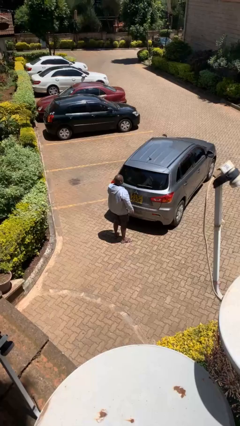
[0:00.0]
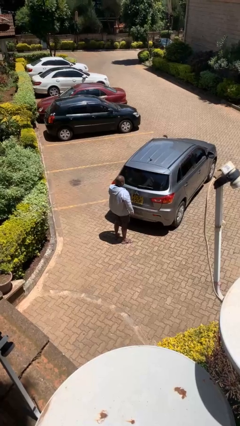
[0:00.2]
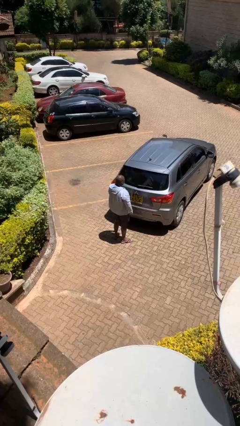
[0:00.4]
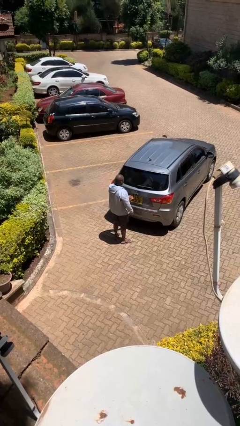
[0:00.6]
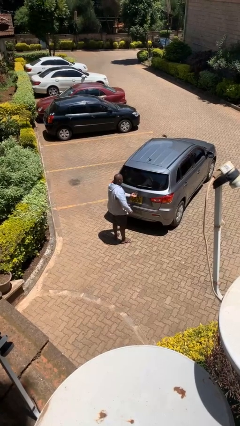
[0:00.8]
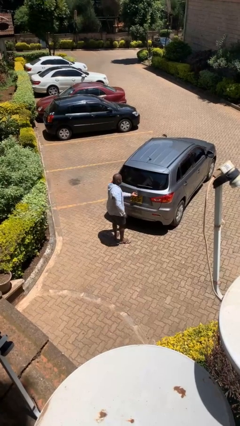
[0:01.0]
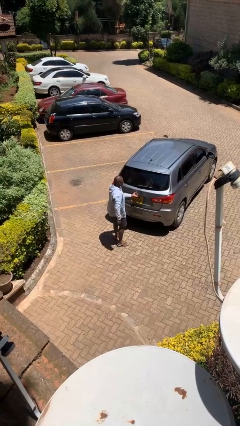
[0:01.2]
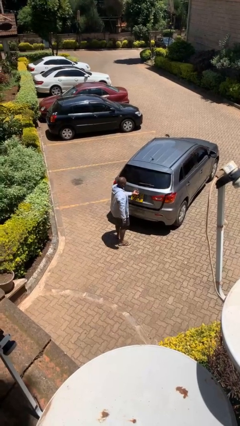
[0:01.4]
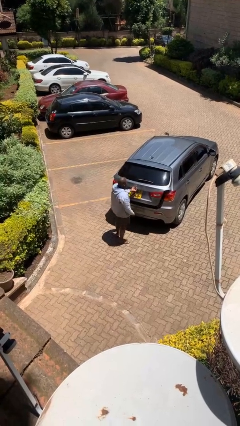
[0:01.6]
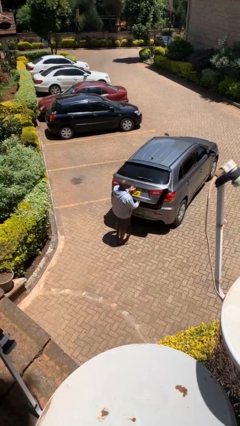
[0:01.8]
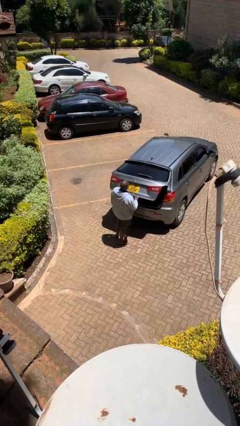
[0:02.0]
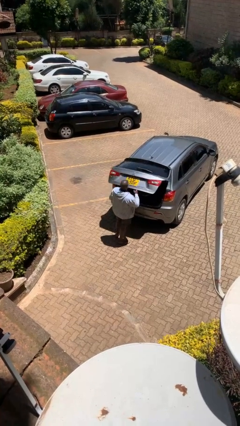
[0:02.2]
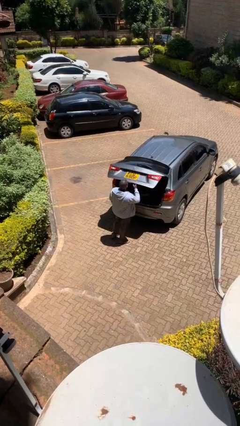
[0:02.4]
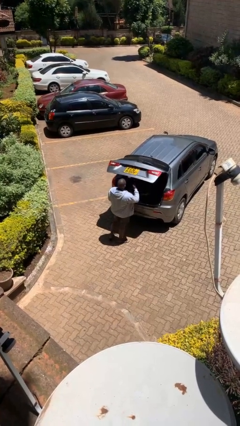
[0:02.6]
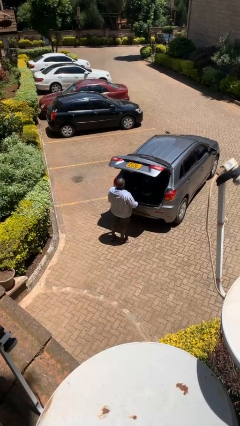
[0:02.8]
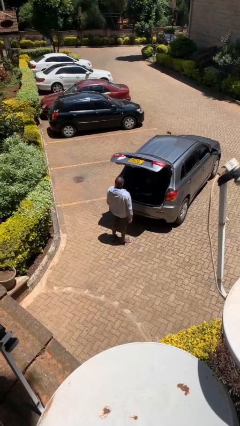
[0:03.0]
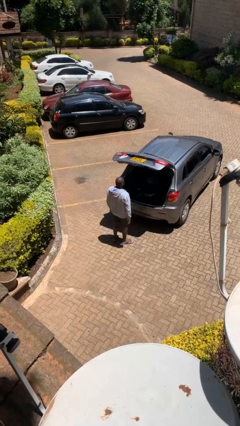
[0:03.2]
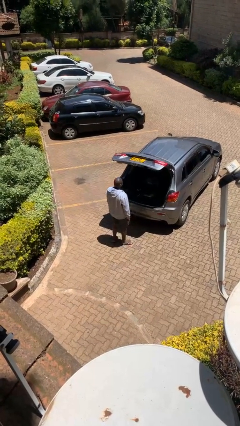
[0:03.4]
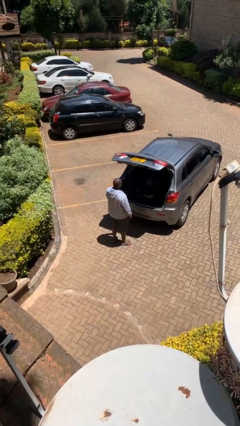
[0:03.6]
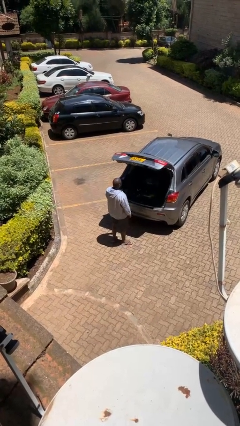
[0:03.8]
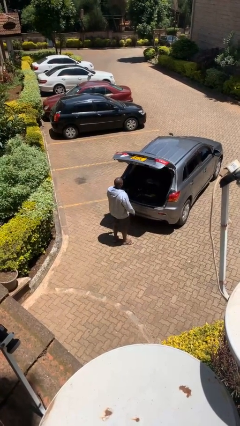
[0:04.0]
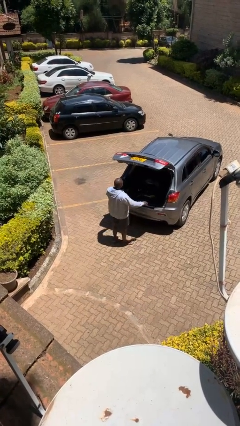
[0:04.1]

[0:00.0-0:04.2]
person opens car trunk

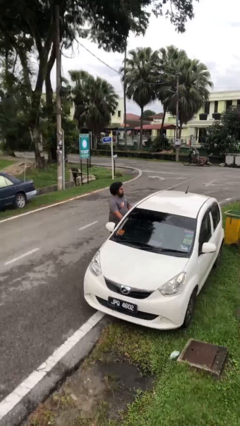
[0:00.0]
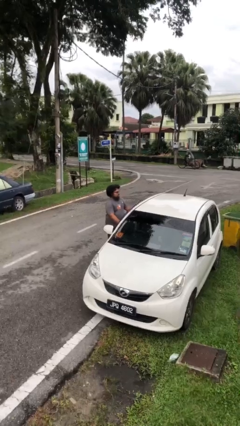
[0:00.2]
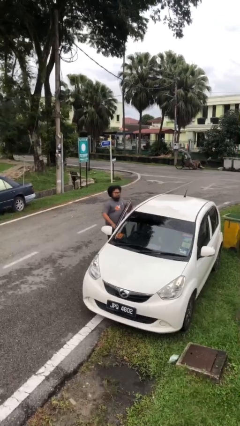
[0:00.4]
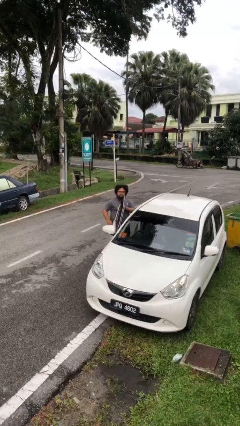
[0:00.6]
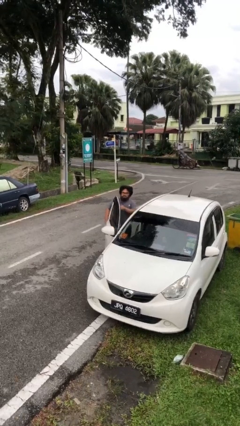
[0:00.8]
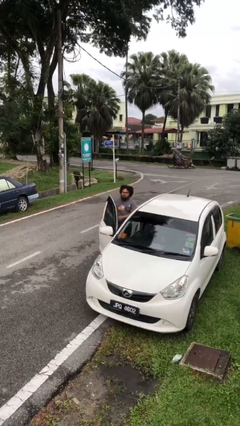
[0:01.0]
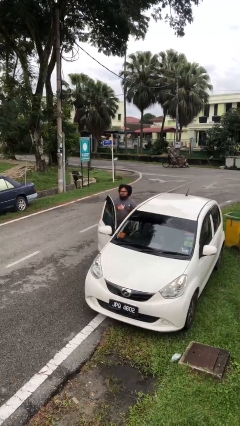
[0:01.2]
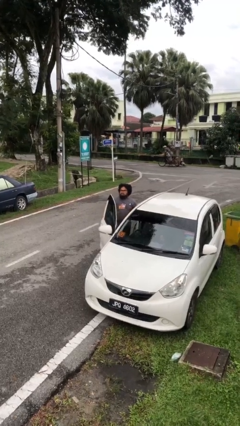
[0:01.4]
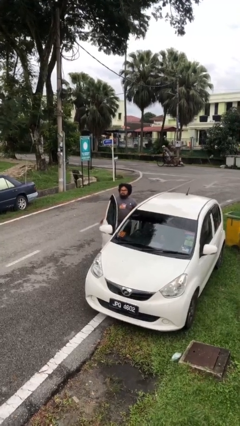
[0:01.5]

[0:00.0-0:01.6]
person opens car door

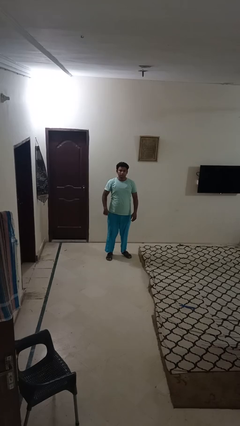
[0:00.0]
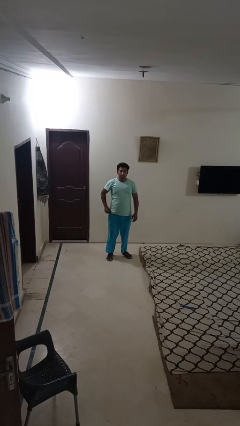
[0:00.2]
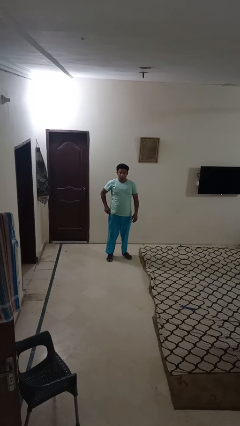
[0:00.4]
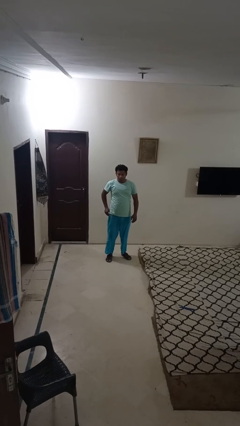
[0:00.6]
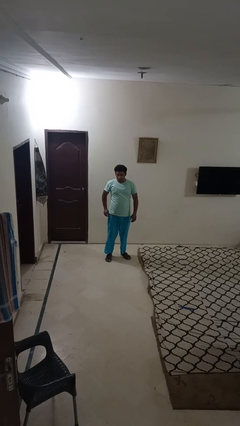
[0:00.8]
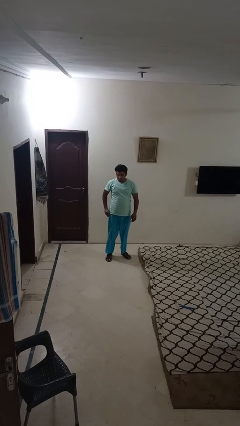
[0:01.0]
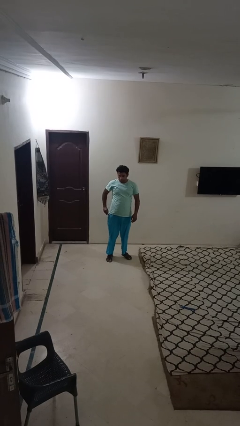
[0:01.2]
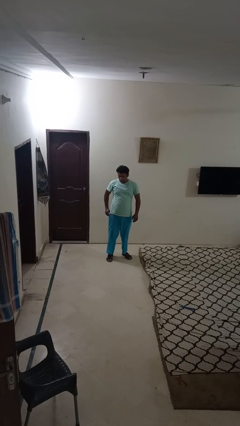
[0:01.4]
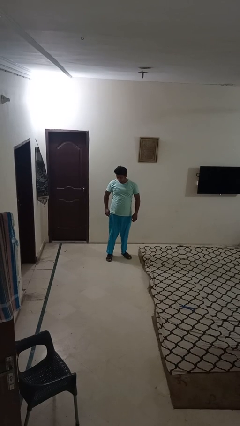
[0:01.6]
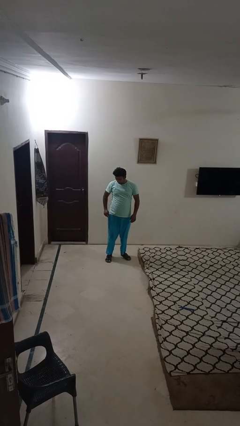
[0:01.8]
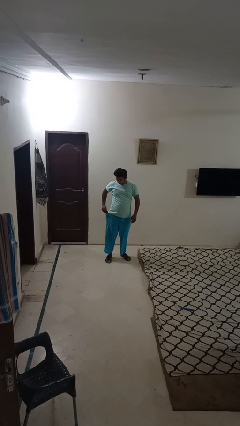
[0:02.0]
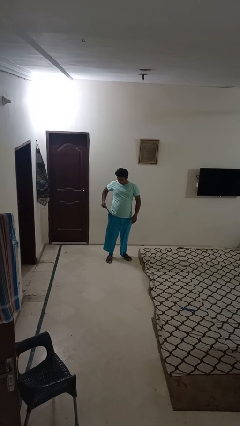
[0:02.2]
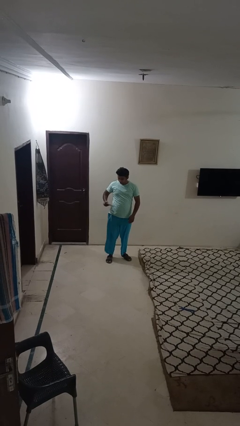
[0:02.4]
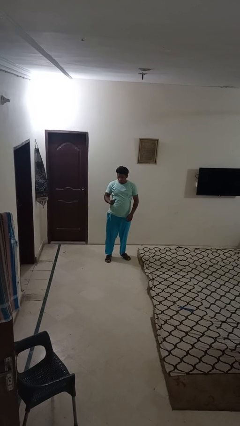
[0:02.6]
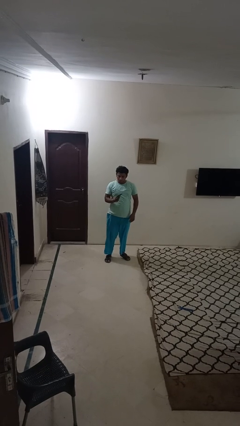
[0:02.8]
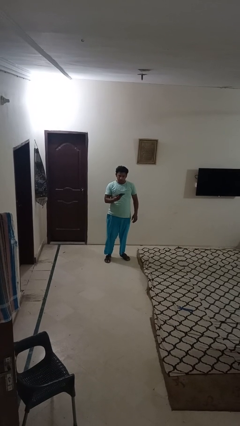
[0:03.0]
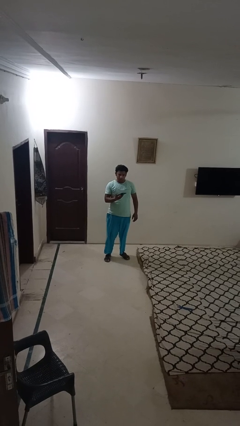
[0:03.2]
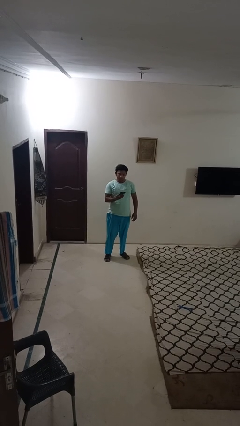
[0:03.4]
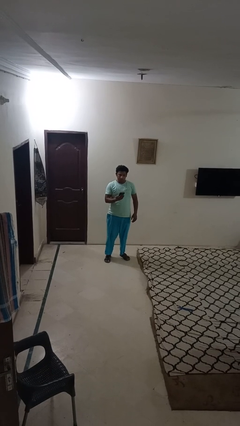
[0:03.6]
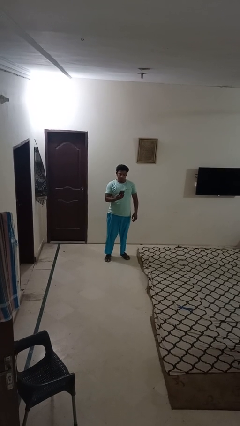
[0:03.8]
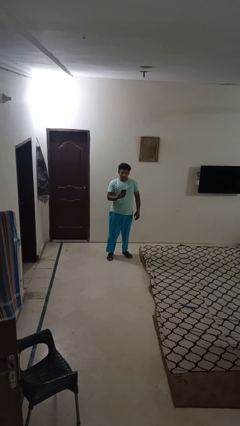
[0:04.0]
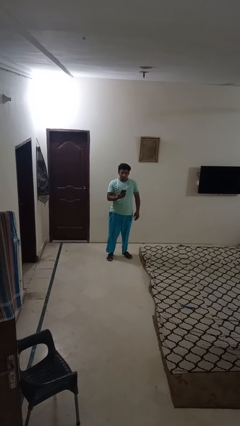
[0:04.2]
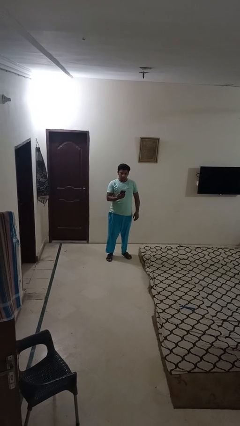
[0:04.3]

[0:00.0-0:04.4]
person takes phone from pocket

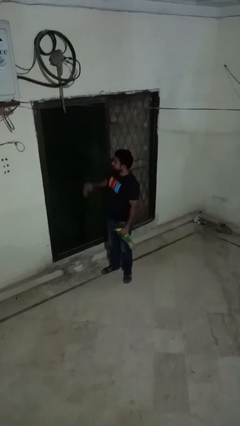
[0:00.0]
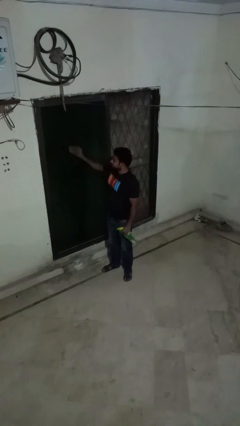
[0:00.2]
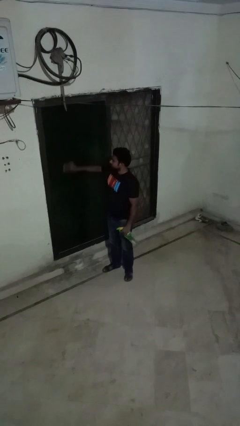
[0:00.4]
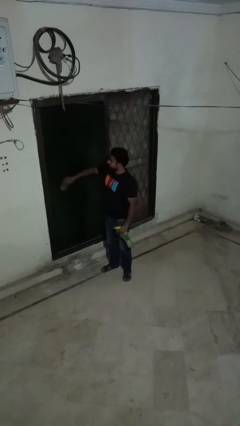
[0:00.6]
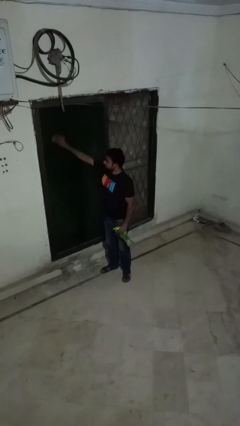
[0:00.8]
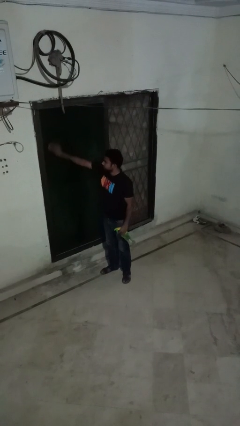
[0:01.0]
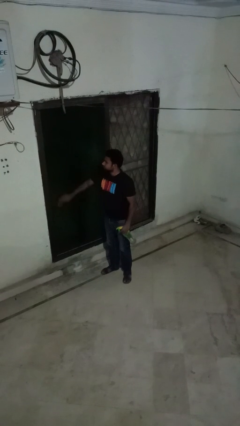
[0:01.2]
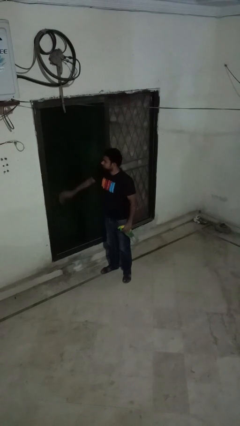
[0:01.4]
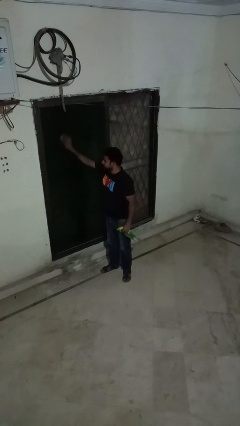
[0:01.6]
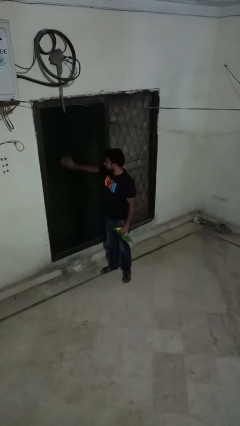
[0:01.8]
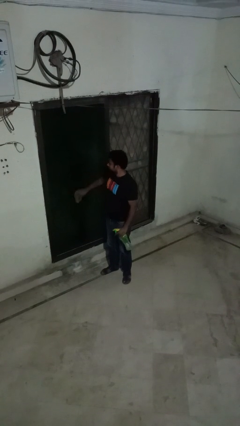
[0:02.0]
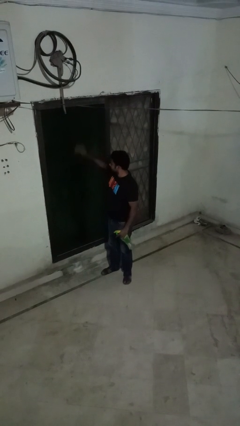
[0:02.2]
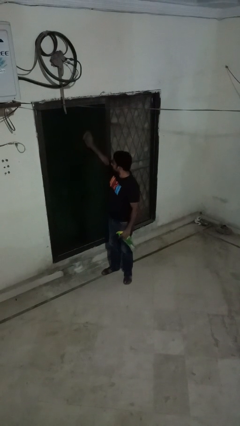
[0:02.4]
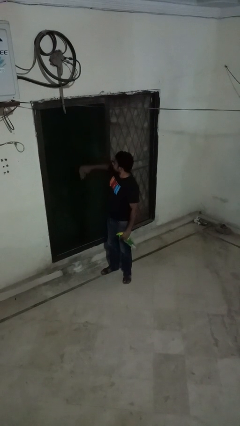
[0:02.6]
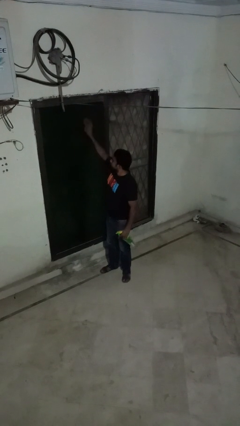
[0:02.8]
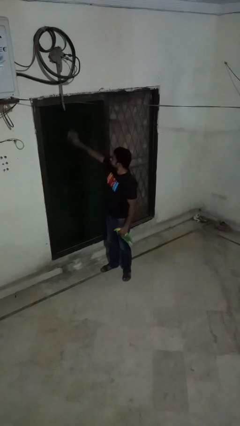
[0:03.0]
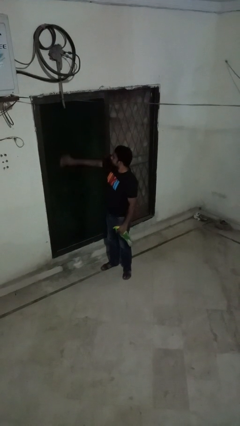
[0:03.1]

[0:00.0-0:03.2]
person washes window

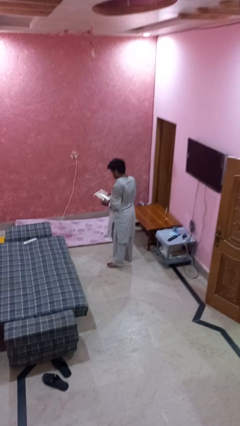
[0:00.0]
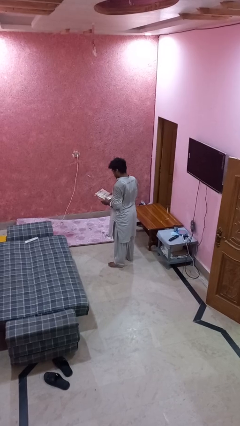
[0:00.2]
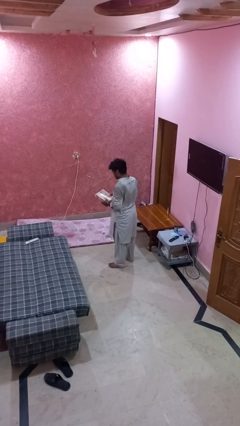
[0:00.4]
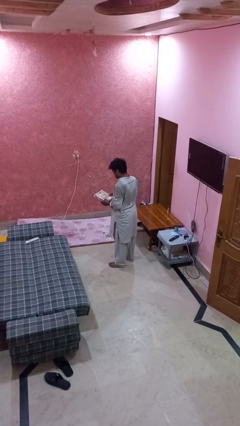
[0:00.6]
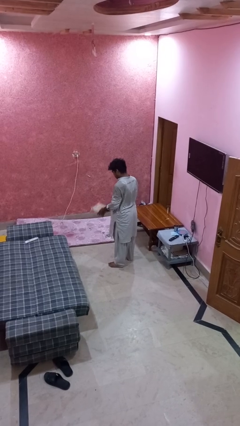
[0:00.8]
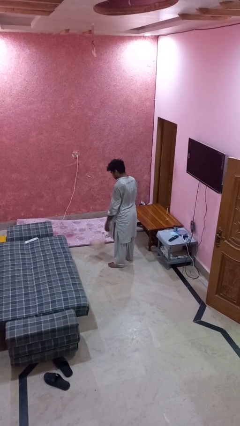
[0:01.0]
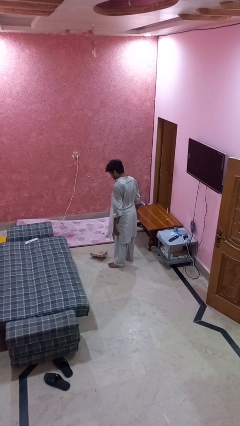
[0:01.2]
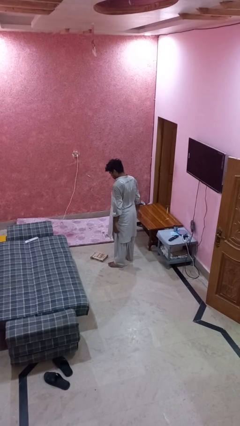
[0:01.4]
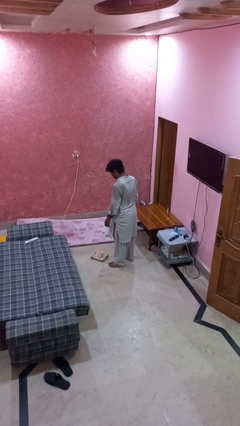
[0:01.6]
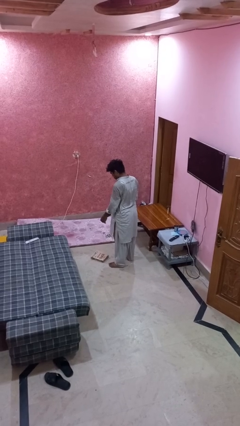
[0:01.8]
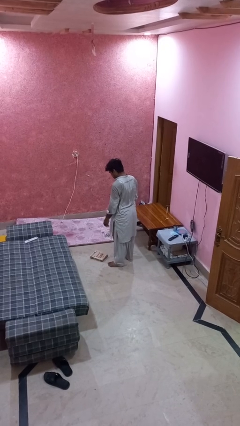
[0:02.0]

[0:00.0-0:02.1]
person throws object to ground

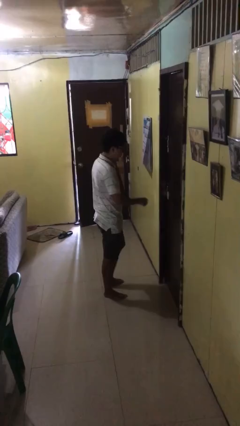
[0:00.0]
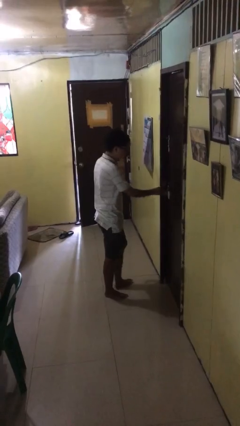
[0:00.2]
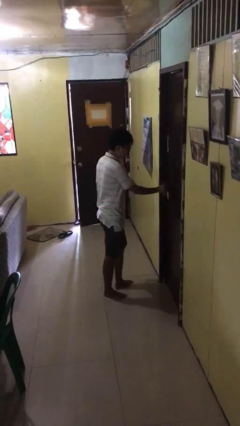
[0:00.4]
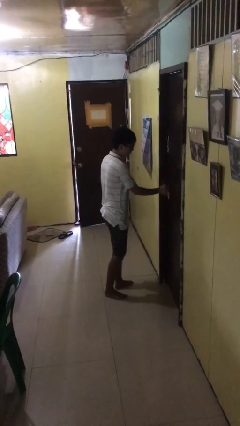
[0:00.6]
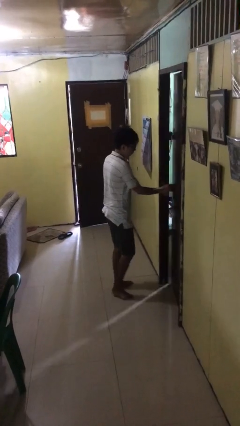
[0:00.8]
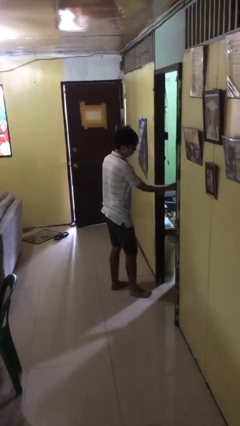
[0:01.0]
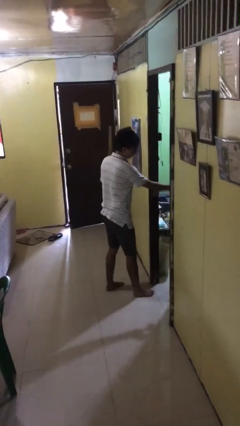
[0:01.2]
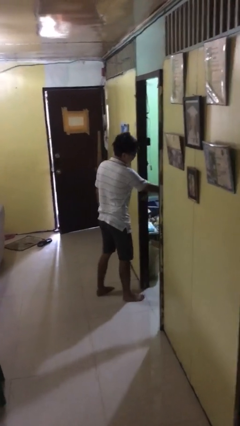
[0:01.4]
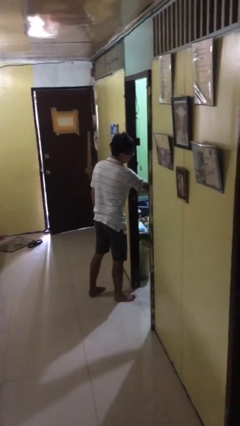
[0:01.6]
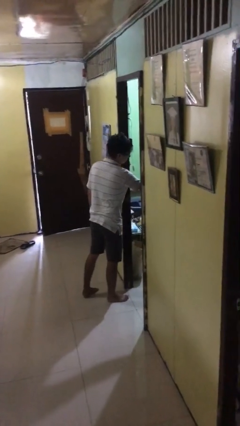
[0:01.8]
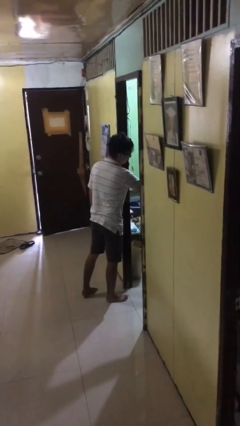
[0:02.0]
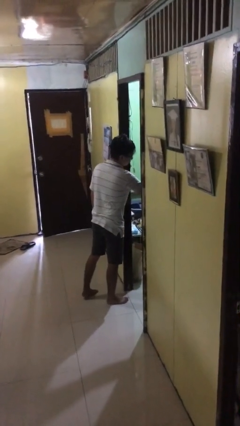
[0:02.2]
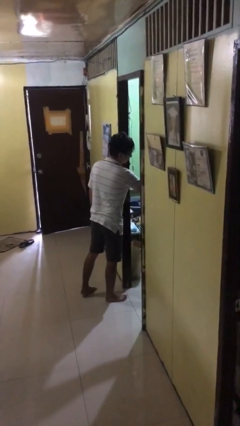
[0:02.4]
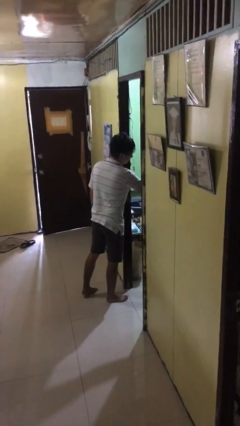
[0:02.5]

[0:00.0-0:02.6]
person opens facility door
